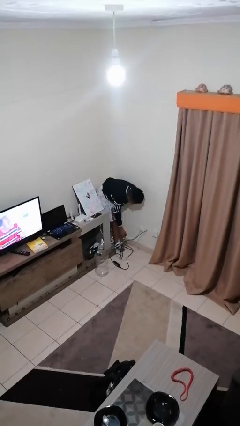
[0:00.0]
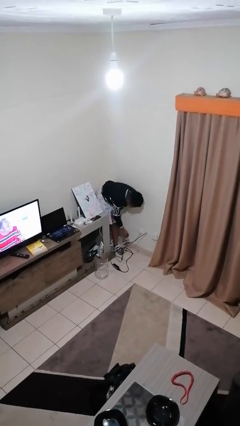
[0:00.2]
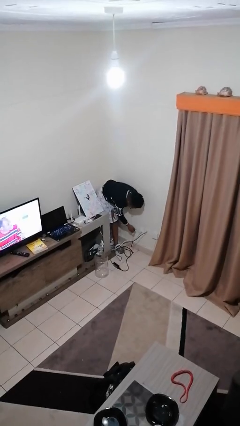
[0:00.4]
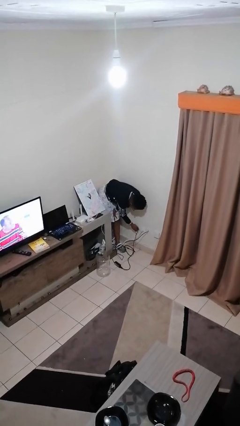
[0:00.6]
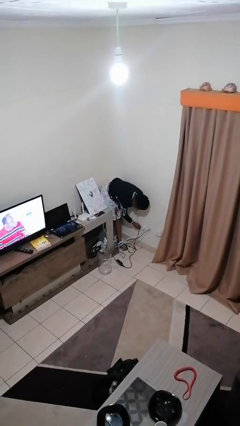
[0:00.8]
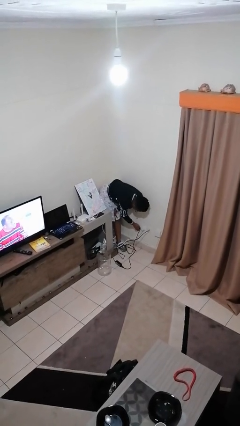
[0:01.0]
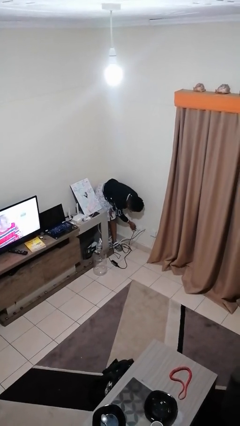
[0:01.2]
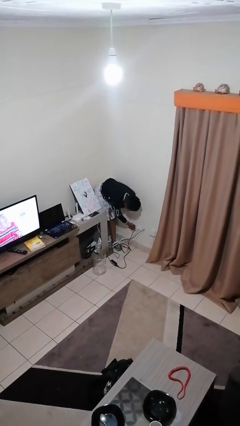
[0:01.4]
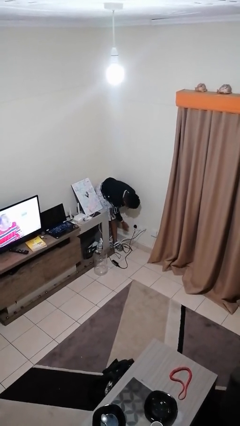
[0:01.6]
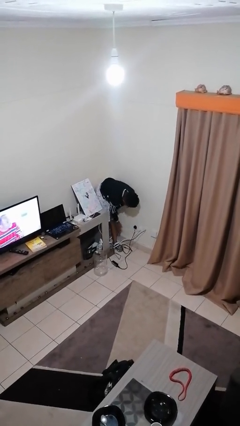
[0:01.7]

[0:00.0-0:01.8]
person plugs into electrical socket

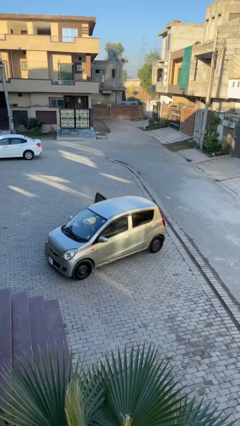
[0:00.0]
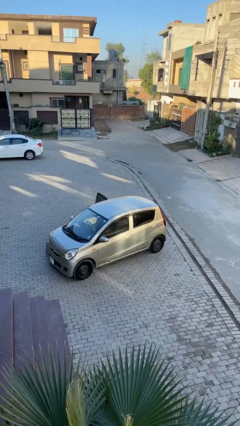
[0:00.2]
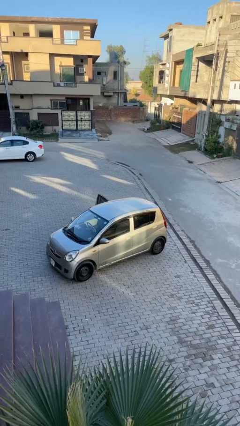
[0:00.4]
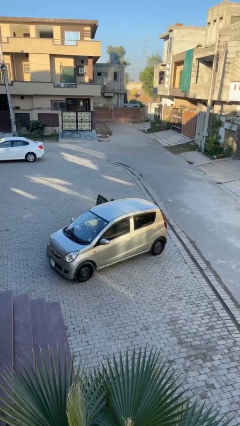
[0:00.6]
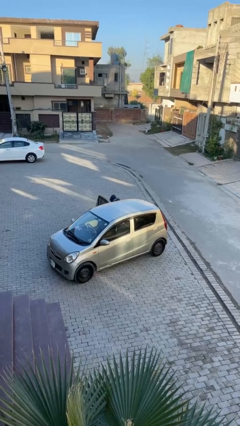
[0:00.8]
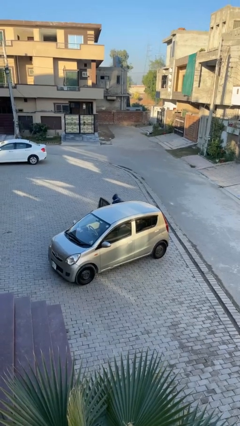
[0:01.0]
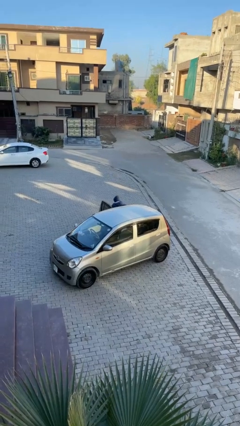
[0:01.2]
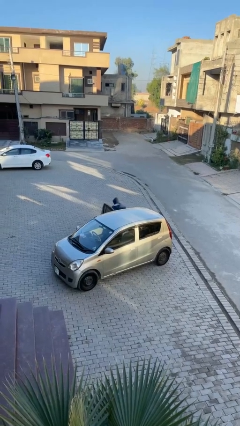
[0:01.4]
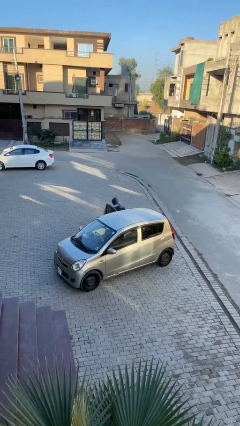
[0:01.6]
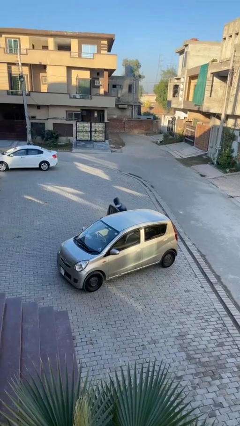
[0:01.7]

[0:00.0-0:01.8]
person exits car

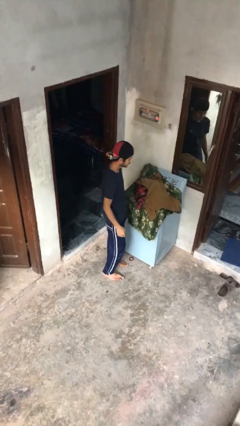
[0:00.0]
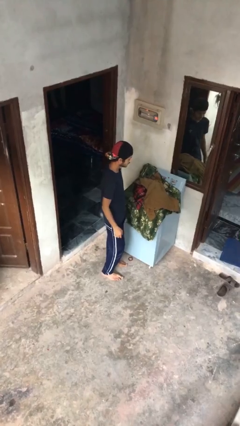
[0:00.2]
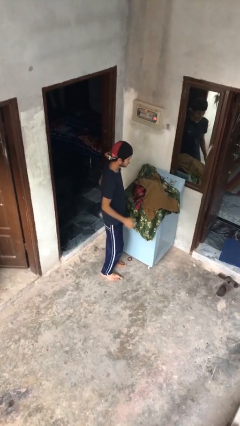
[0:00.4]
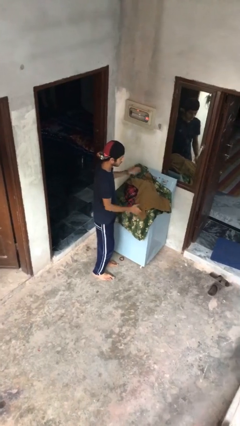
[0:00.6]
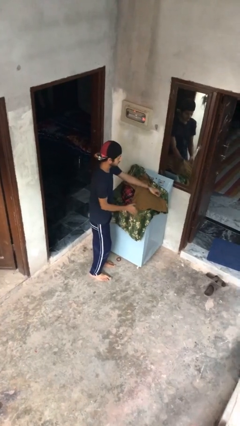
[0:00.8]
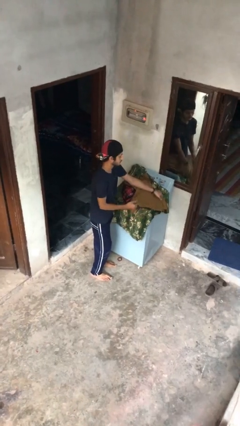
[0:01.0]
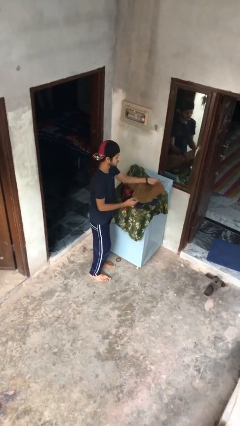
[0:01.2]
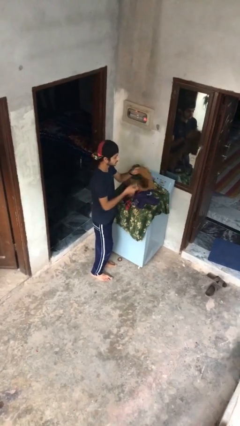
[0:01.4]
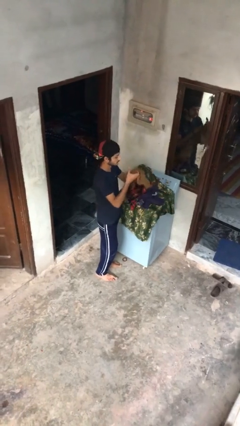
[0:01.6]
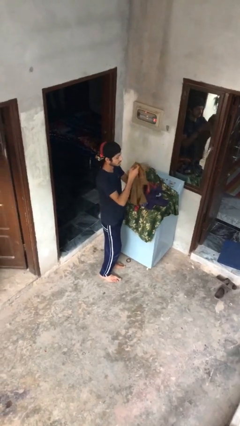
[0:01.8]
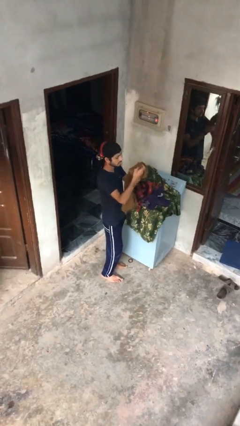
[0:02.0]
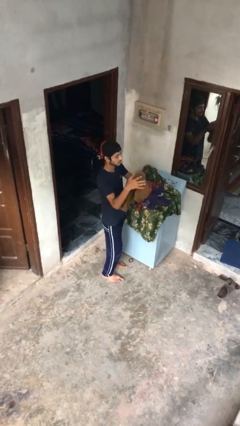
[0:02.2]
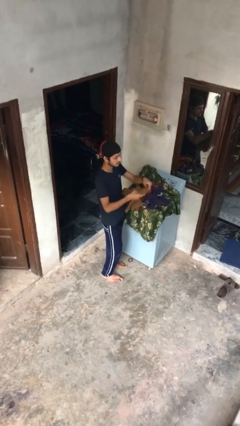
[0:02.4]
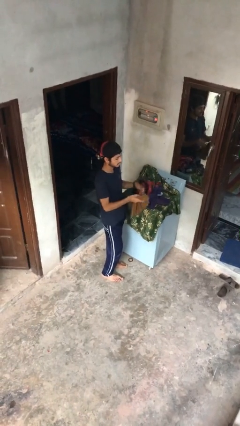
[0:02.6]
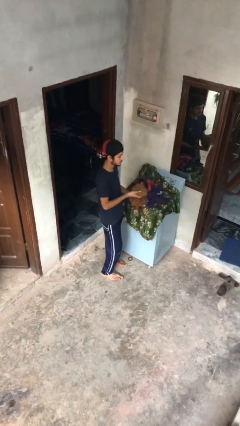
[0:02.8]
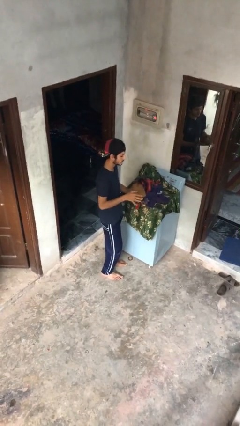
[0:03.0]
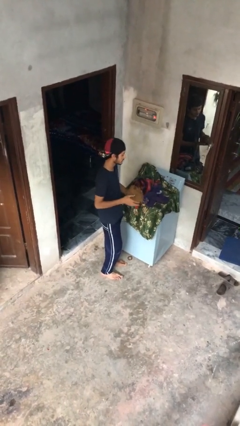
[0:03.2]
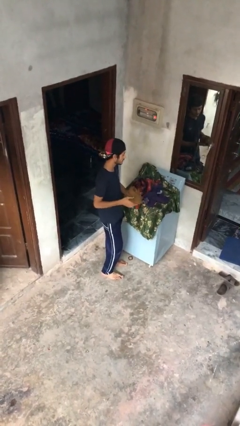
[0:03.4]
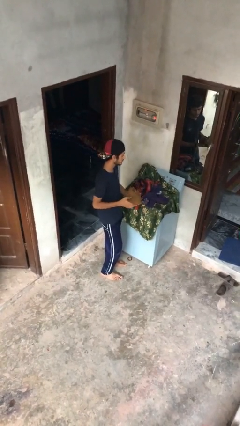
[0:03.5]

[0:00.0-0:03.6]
person folds shirt

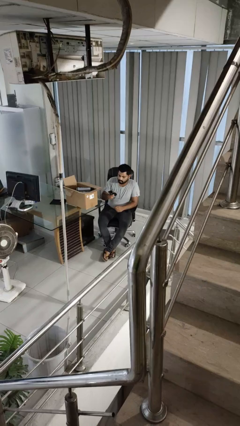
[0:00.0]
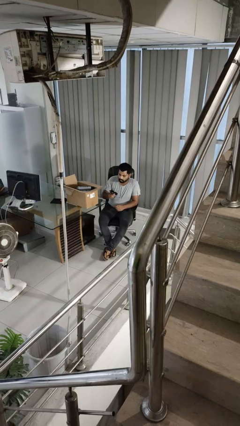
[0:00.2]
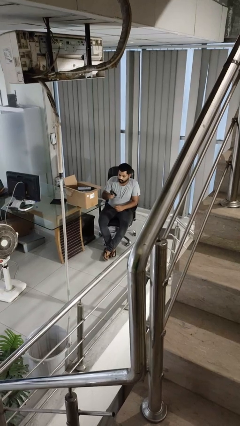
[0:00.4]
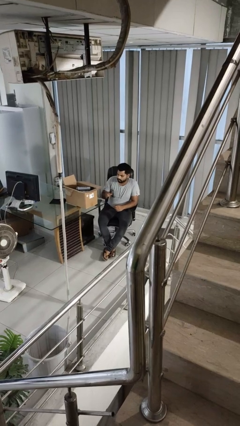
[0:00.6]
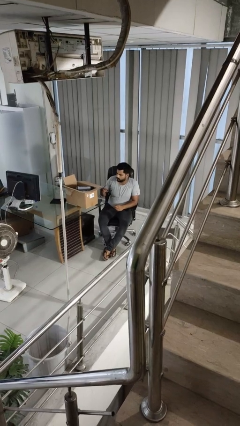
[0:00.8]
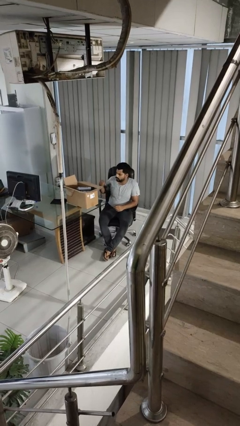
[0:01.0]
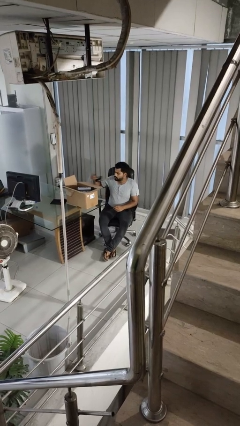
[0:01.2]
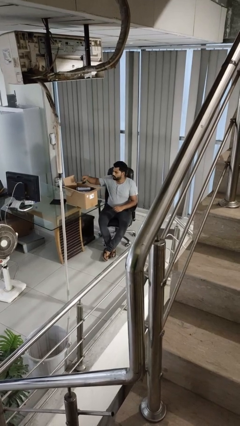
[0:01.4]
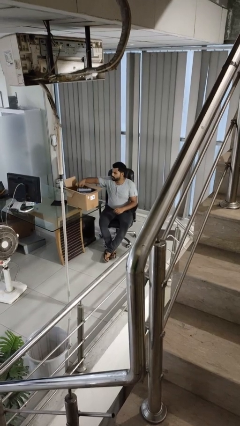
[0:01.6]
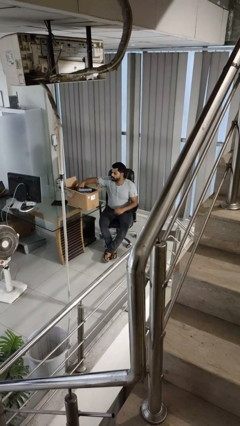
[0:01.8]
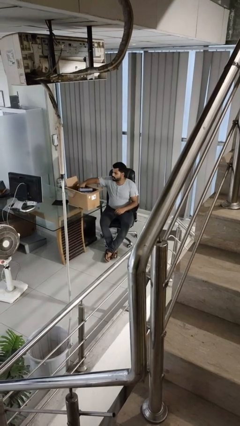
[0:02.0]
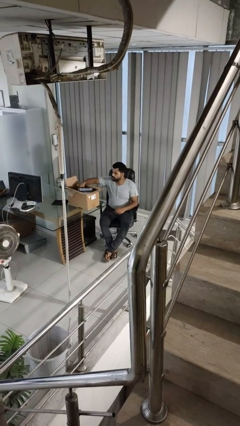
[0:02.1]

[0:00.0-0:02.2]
person puts object into box

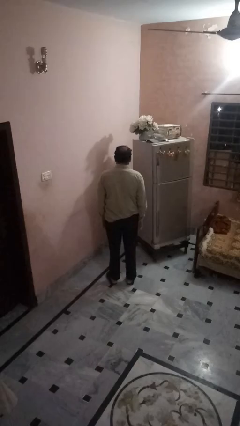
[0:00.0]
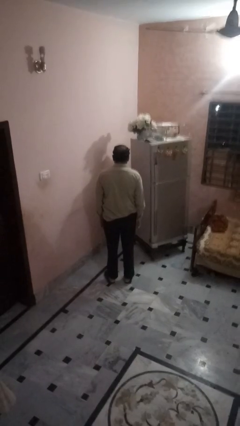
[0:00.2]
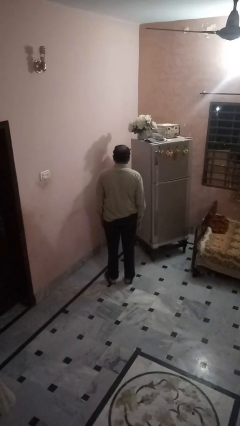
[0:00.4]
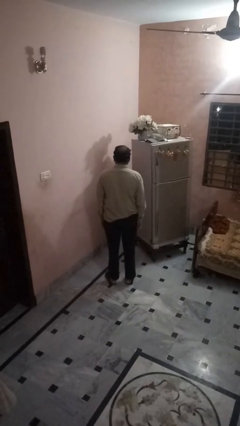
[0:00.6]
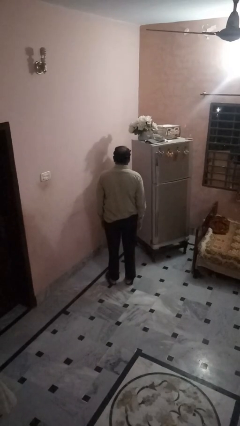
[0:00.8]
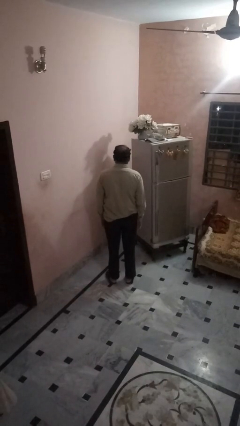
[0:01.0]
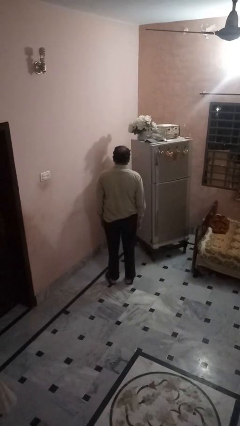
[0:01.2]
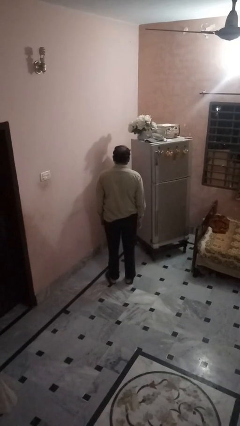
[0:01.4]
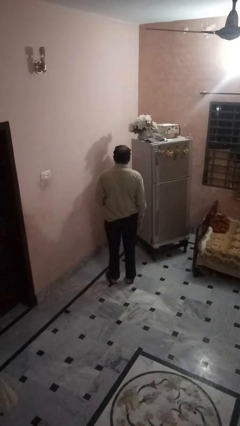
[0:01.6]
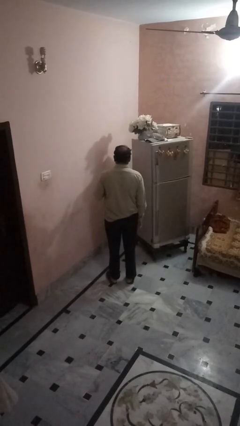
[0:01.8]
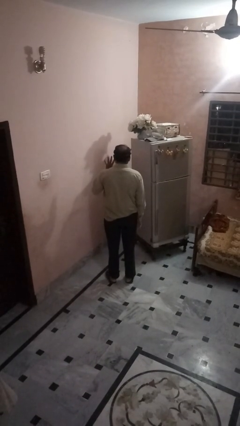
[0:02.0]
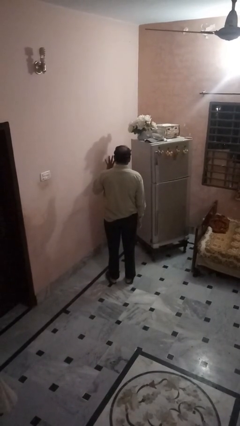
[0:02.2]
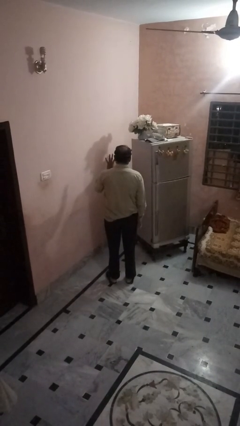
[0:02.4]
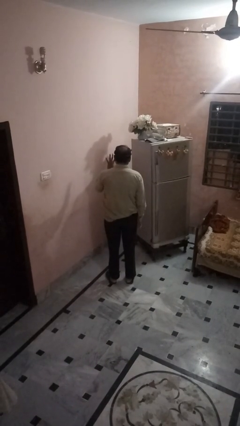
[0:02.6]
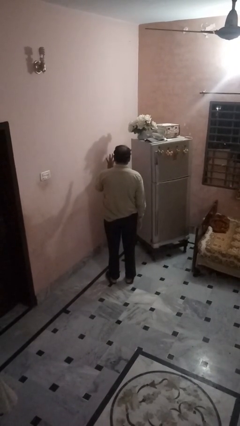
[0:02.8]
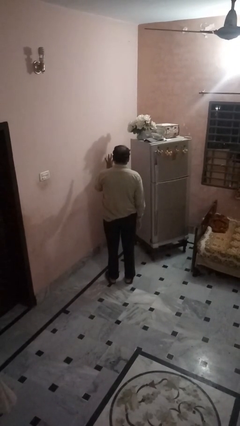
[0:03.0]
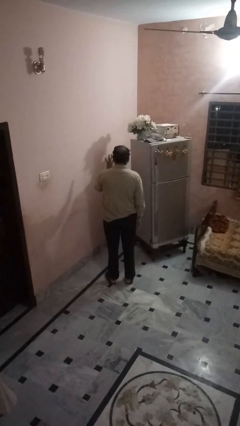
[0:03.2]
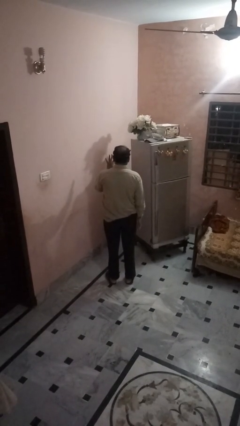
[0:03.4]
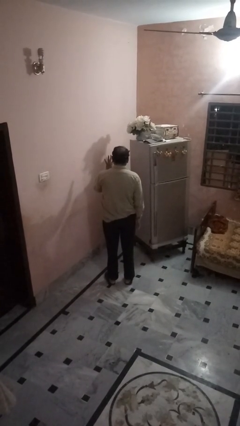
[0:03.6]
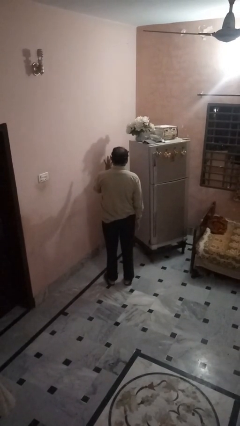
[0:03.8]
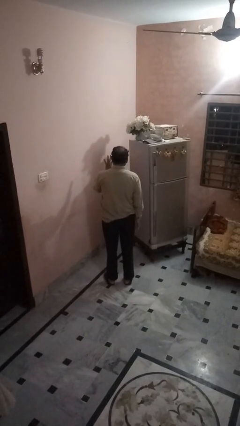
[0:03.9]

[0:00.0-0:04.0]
person gestures number four

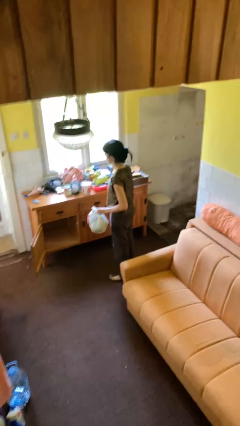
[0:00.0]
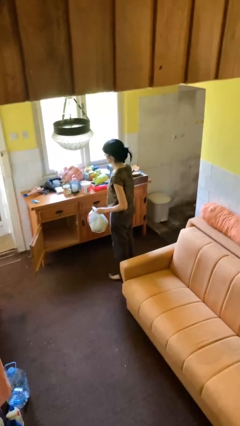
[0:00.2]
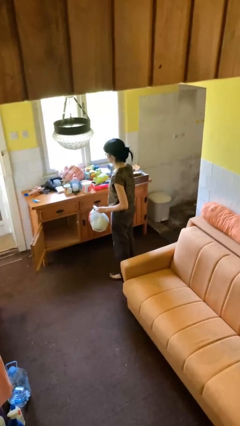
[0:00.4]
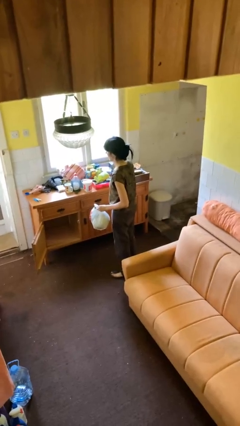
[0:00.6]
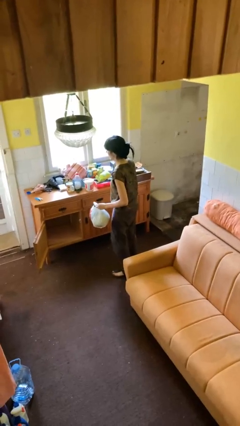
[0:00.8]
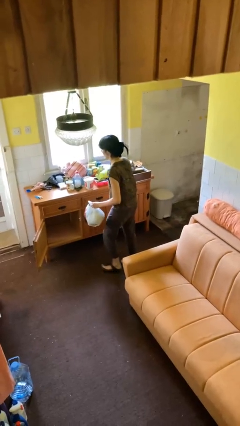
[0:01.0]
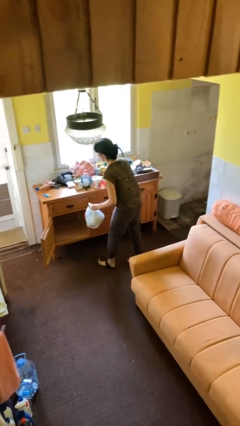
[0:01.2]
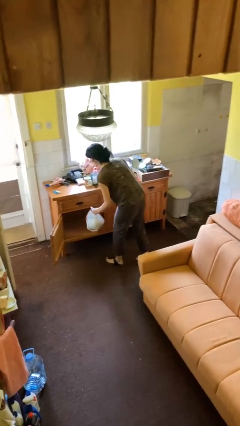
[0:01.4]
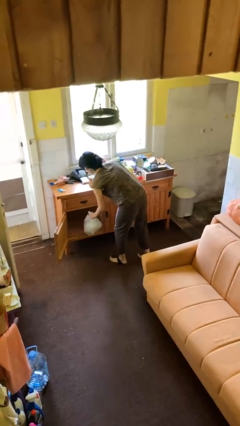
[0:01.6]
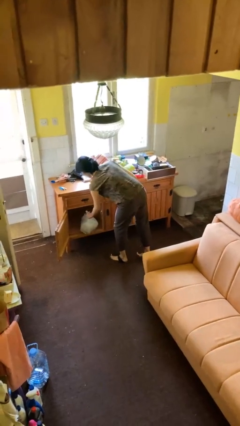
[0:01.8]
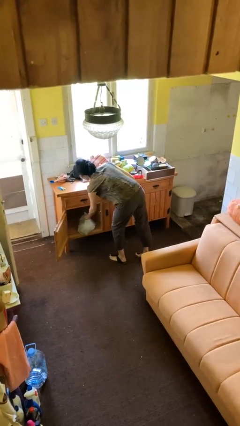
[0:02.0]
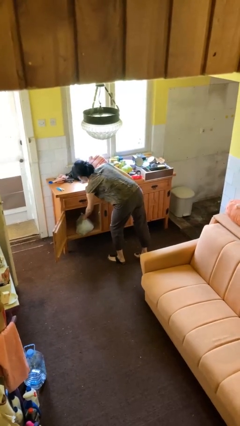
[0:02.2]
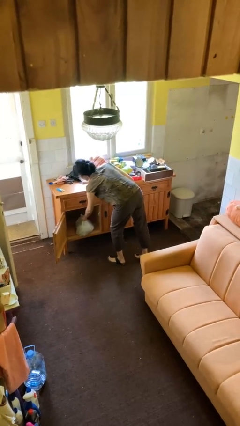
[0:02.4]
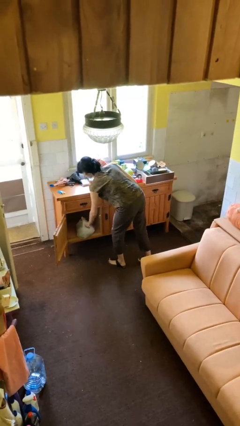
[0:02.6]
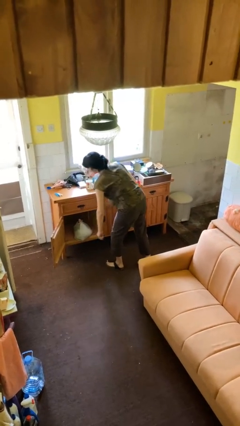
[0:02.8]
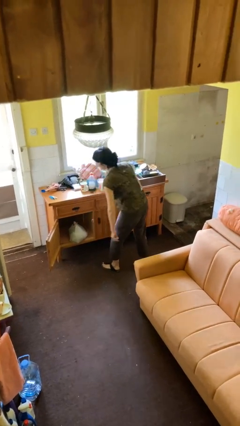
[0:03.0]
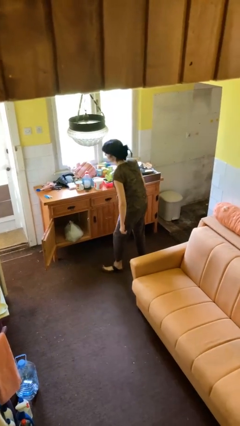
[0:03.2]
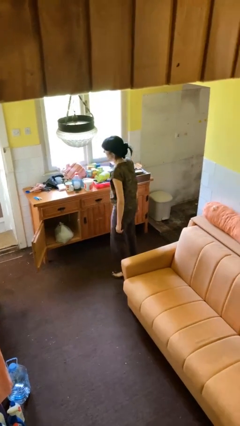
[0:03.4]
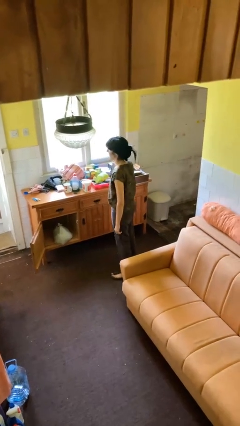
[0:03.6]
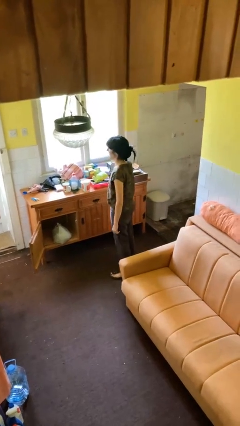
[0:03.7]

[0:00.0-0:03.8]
person puts down object into cabinet
